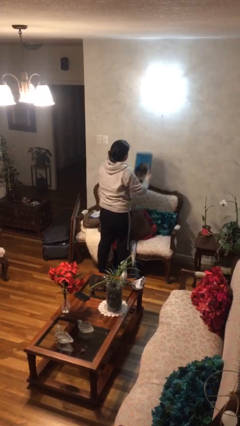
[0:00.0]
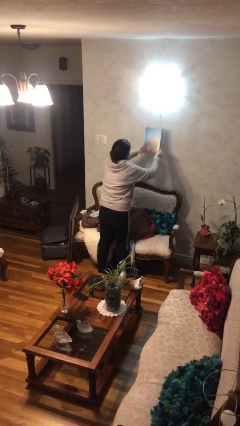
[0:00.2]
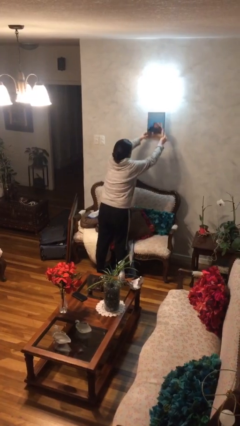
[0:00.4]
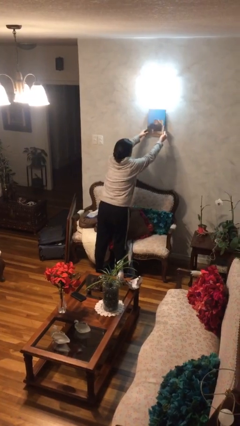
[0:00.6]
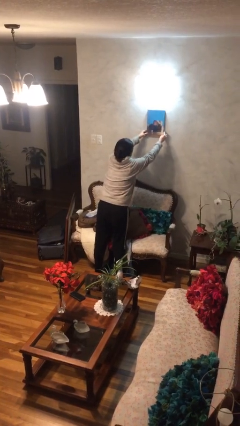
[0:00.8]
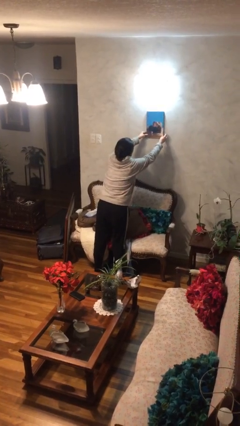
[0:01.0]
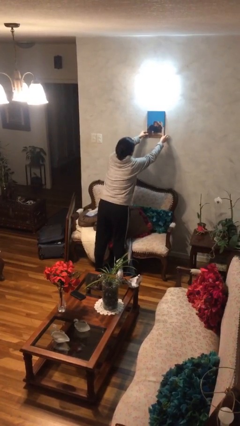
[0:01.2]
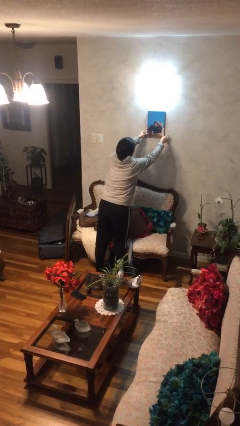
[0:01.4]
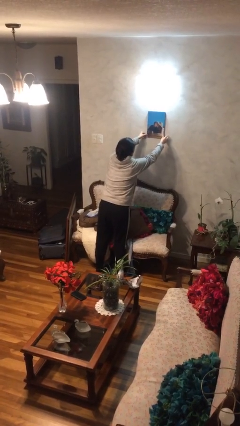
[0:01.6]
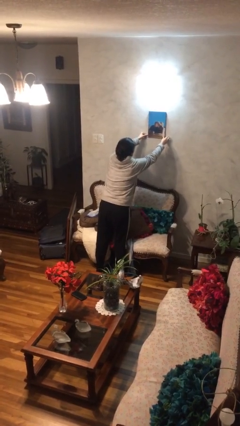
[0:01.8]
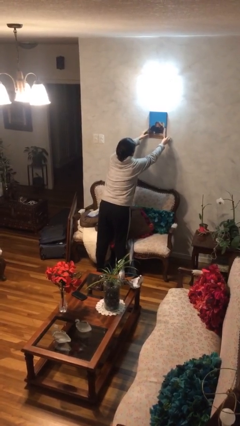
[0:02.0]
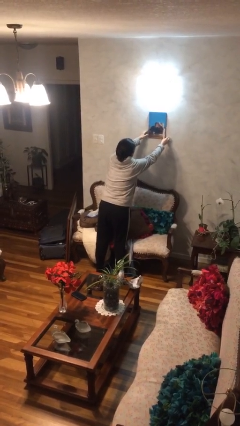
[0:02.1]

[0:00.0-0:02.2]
person puts up picture frame

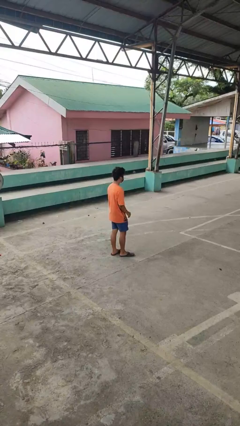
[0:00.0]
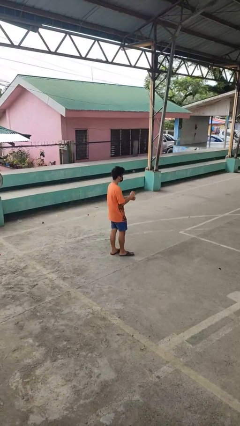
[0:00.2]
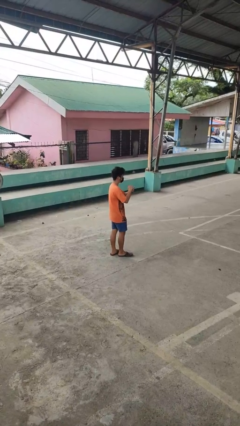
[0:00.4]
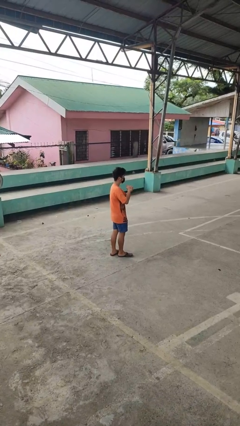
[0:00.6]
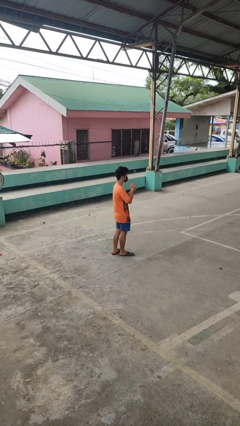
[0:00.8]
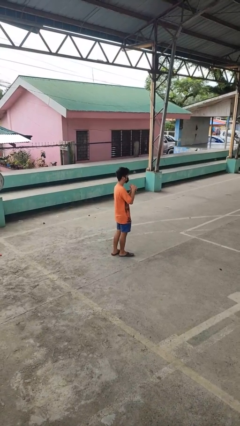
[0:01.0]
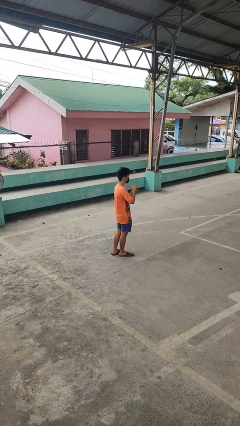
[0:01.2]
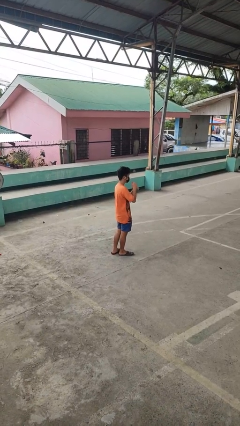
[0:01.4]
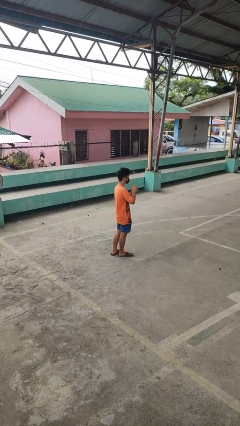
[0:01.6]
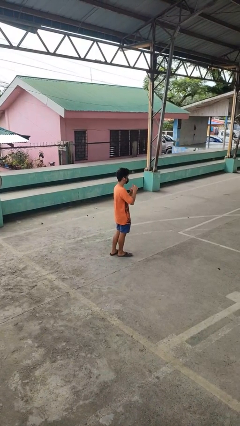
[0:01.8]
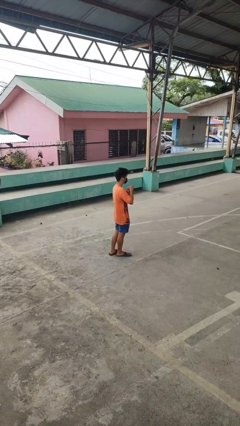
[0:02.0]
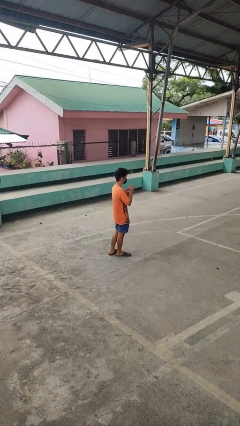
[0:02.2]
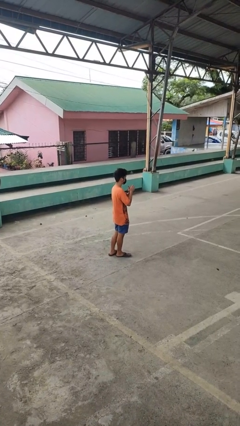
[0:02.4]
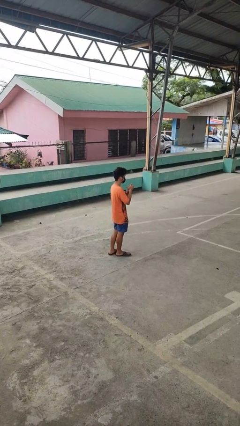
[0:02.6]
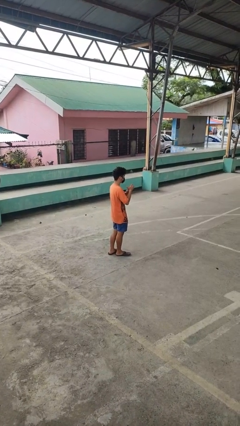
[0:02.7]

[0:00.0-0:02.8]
person cracks knuckles

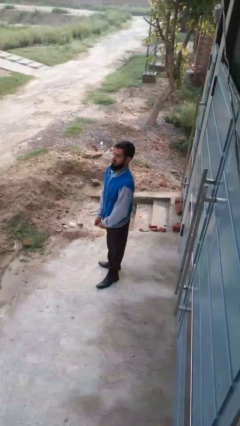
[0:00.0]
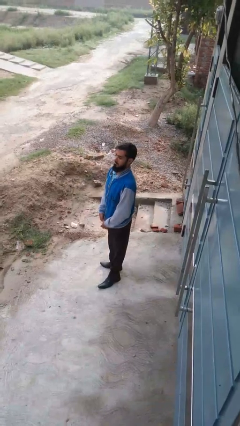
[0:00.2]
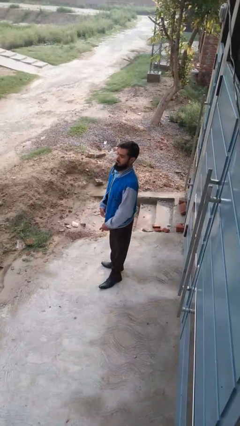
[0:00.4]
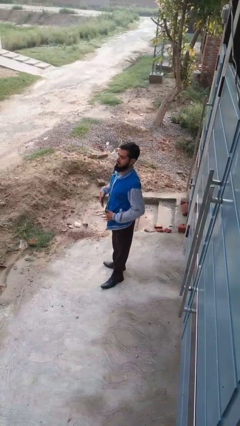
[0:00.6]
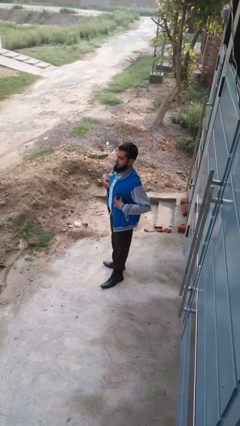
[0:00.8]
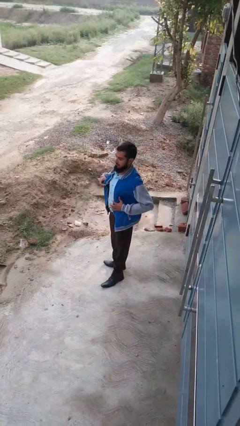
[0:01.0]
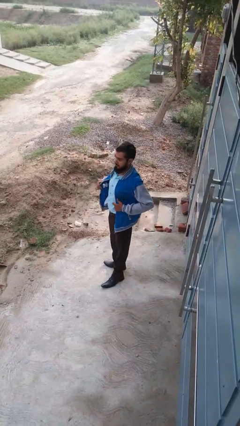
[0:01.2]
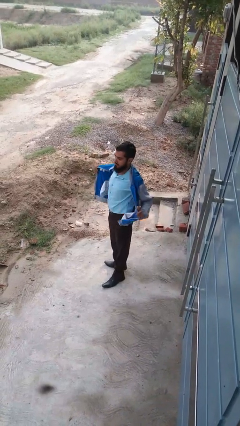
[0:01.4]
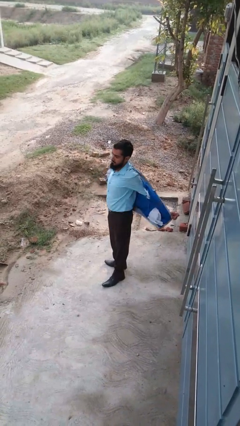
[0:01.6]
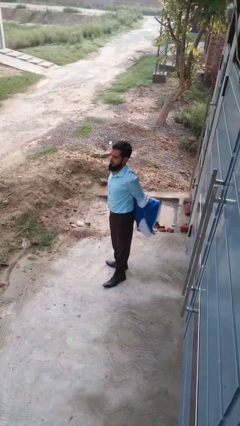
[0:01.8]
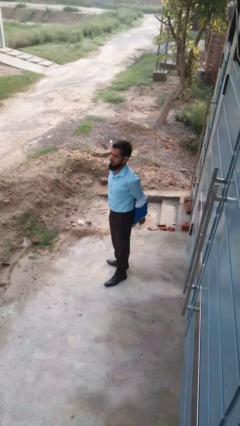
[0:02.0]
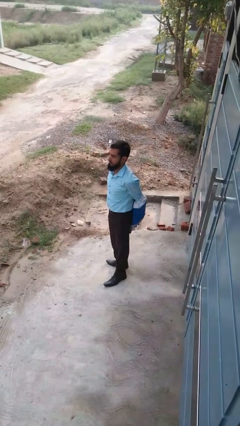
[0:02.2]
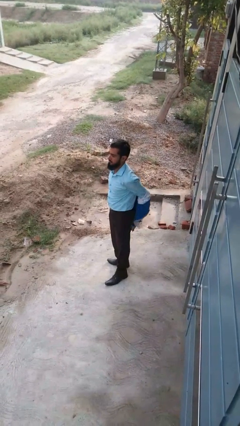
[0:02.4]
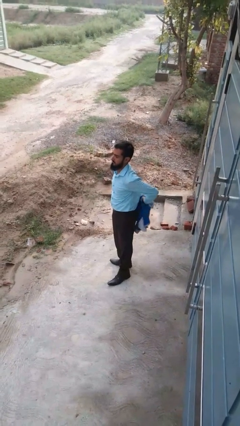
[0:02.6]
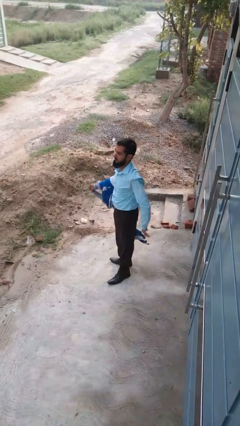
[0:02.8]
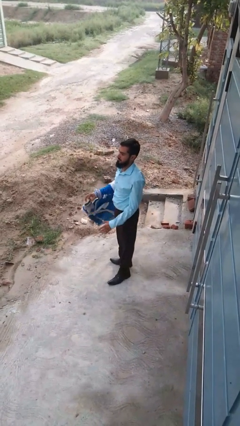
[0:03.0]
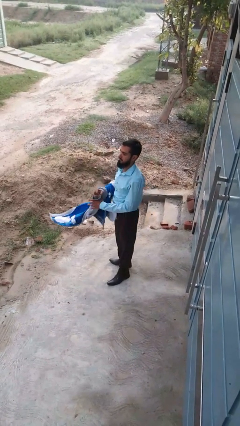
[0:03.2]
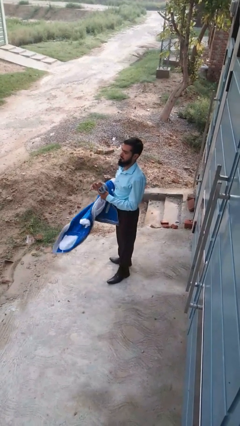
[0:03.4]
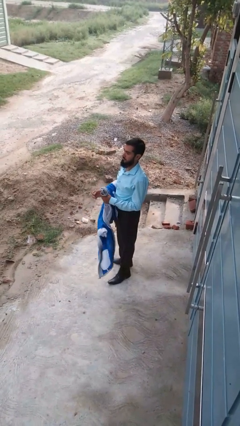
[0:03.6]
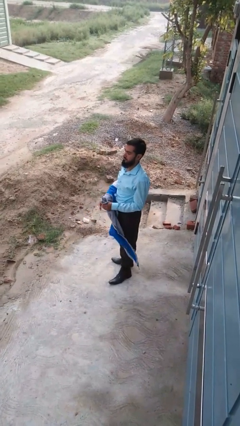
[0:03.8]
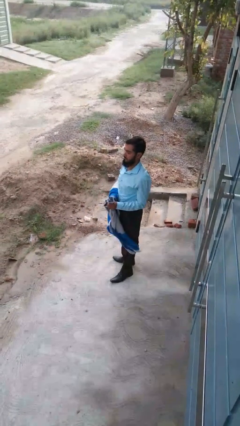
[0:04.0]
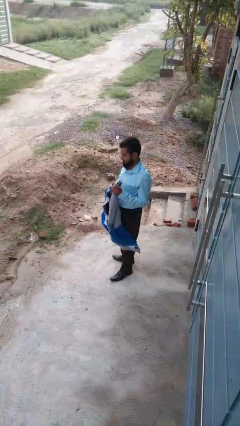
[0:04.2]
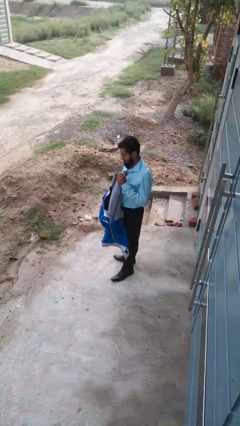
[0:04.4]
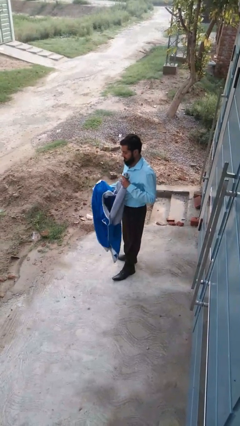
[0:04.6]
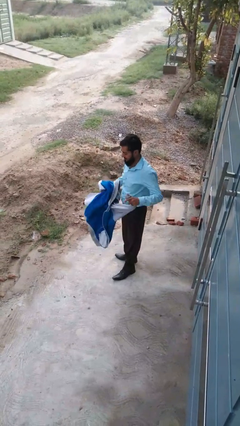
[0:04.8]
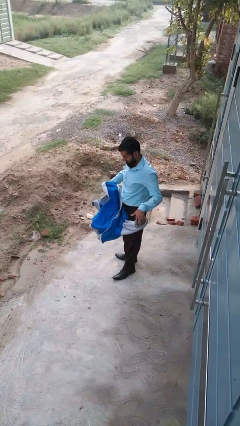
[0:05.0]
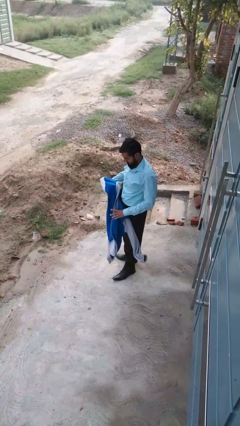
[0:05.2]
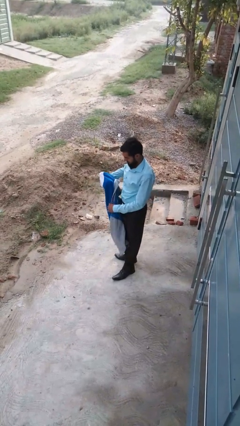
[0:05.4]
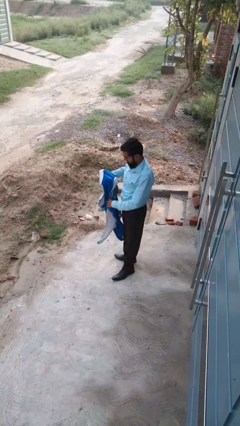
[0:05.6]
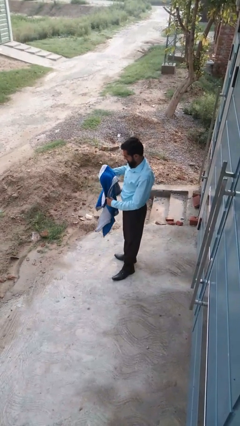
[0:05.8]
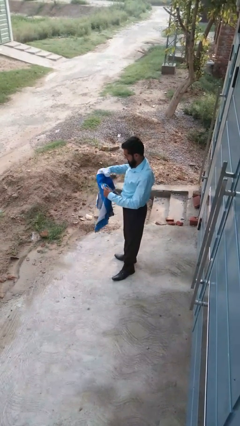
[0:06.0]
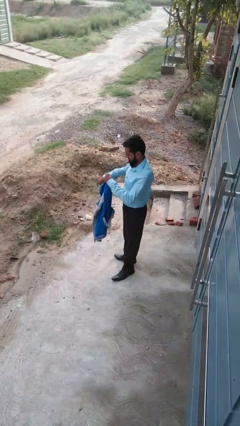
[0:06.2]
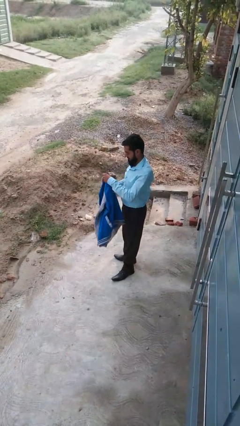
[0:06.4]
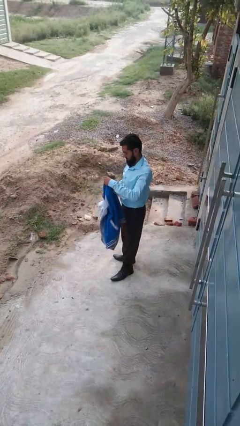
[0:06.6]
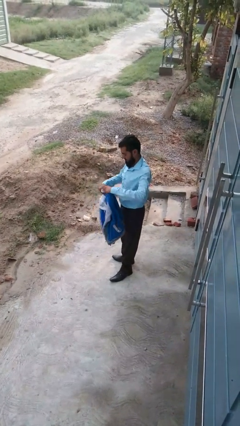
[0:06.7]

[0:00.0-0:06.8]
person takes off jacket

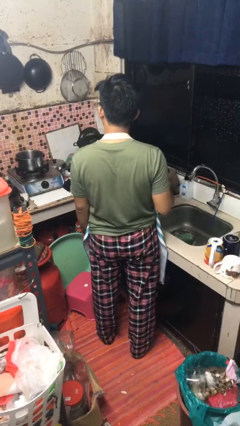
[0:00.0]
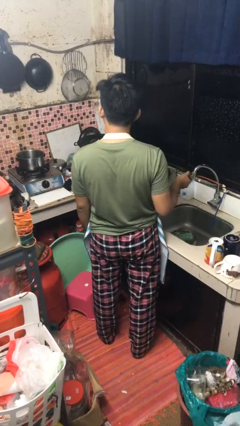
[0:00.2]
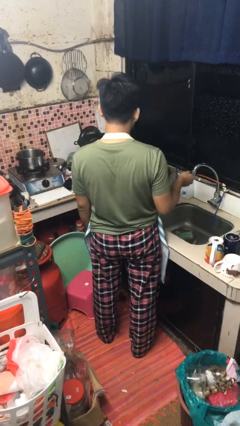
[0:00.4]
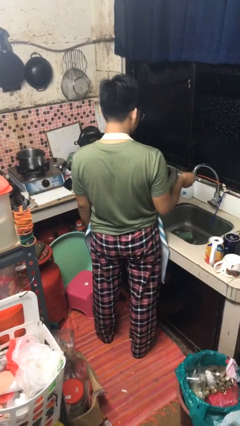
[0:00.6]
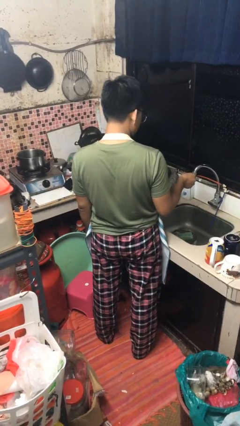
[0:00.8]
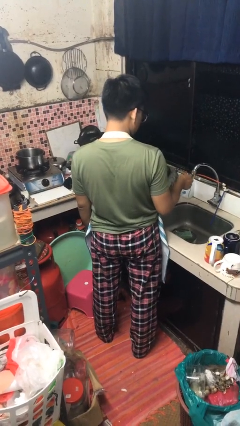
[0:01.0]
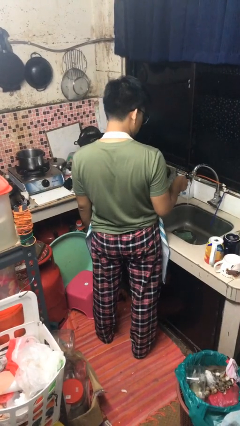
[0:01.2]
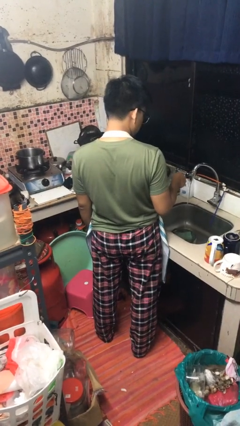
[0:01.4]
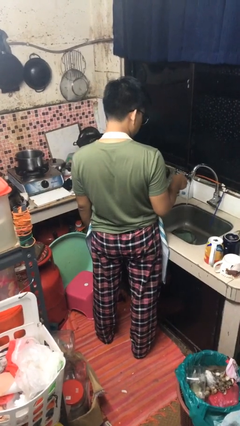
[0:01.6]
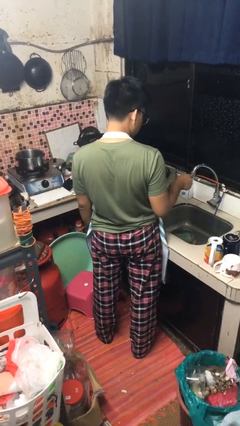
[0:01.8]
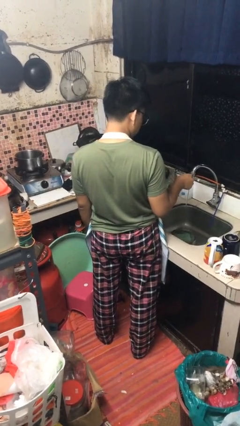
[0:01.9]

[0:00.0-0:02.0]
person turns on faucet

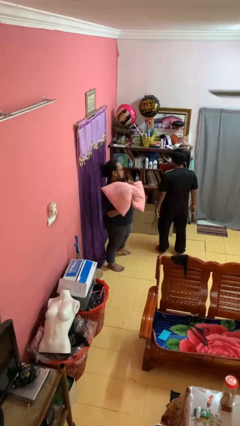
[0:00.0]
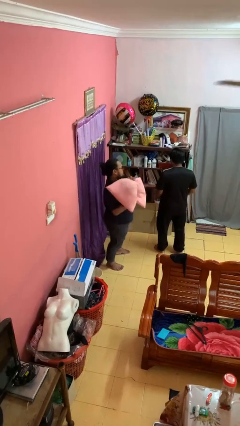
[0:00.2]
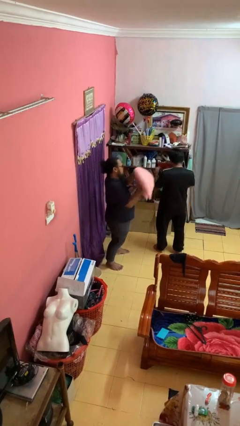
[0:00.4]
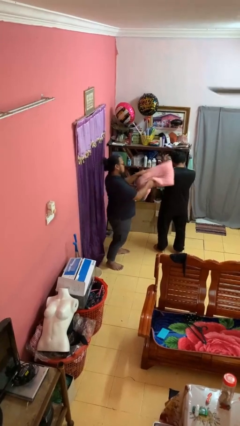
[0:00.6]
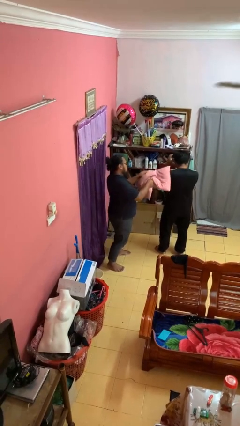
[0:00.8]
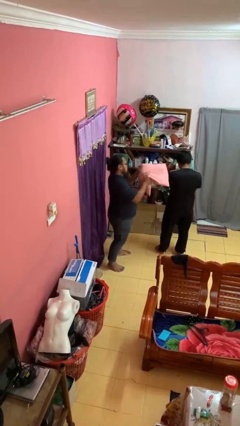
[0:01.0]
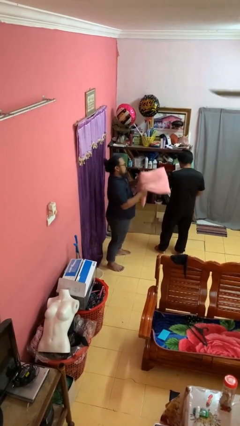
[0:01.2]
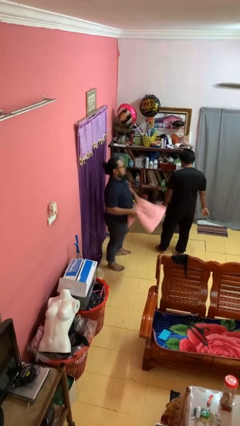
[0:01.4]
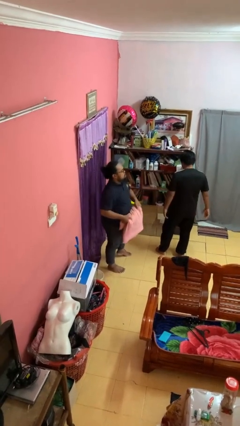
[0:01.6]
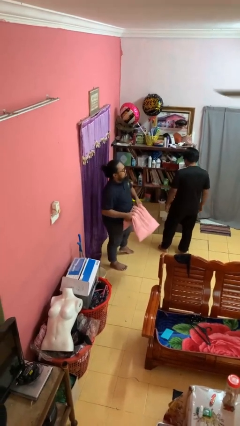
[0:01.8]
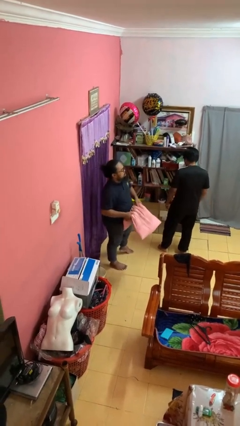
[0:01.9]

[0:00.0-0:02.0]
person hits person with pillow

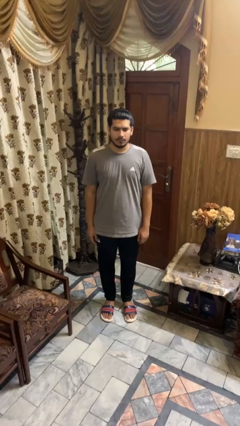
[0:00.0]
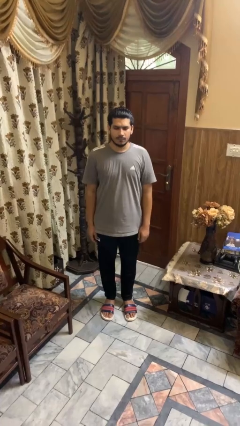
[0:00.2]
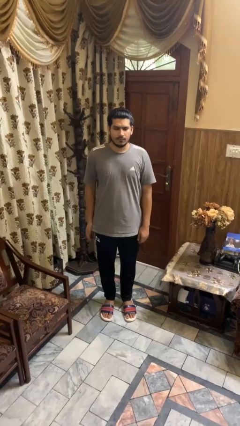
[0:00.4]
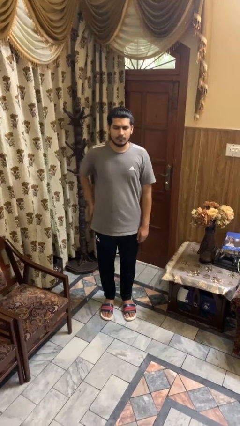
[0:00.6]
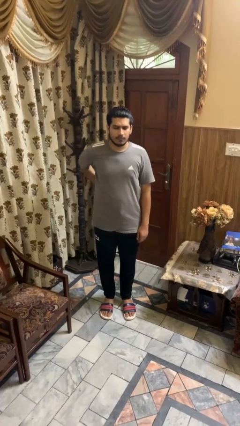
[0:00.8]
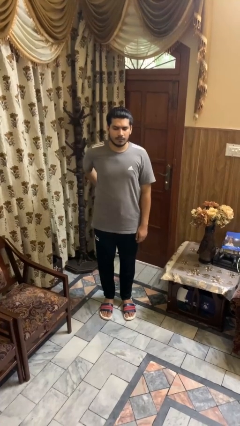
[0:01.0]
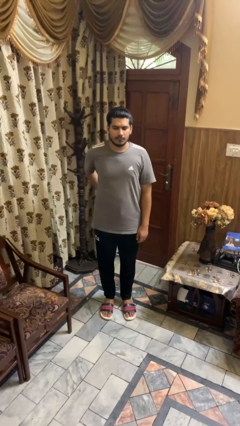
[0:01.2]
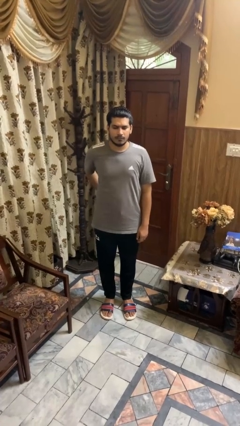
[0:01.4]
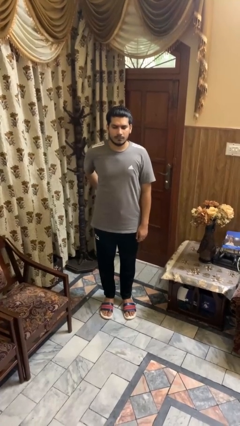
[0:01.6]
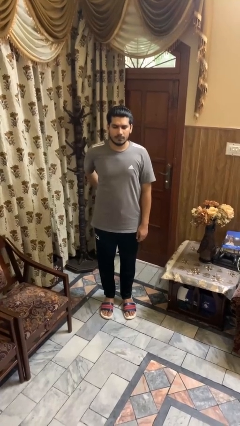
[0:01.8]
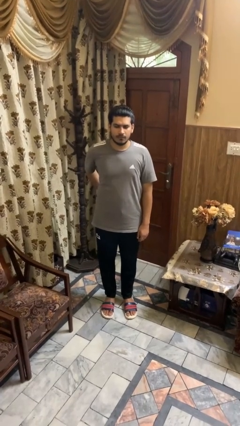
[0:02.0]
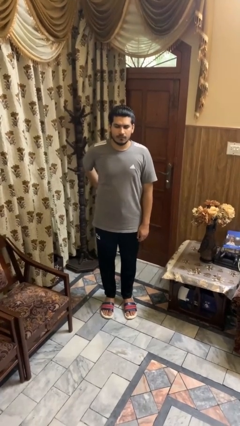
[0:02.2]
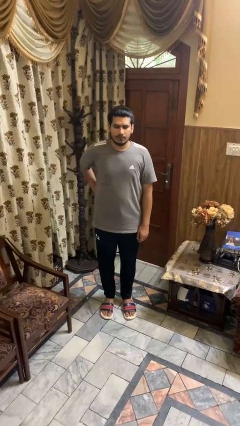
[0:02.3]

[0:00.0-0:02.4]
person puts hands in back pockets
